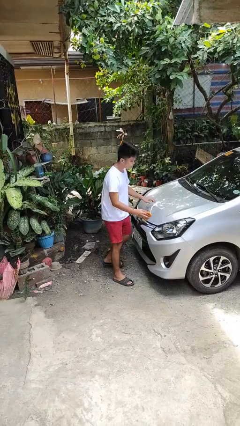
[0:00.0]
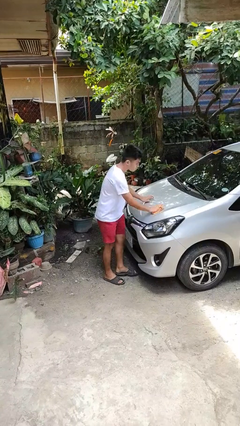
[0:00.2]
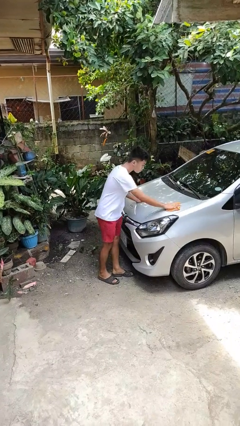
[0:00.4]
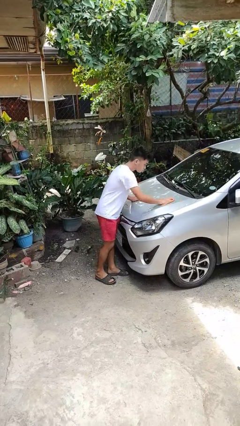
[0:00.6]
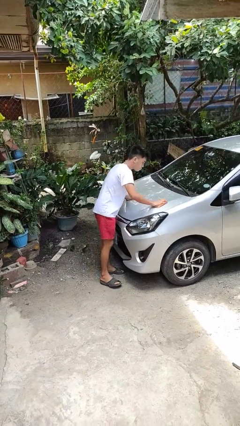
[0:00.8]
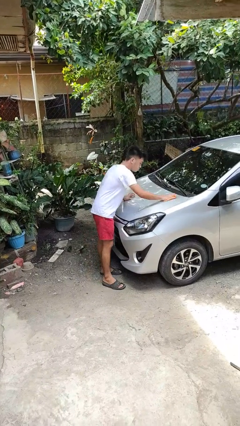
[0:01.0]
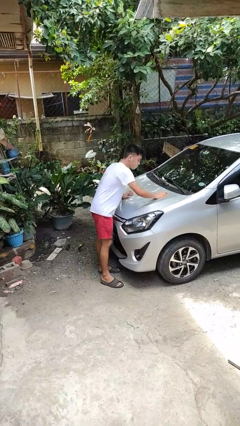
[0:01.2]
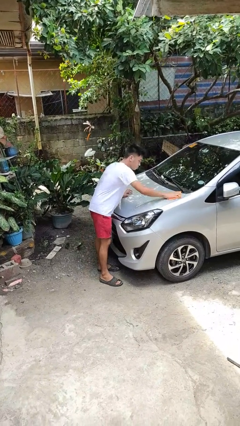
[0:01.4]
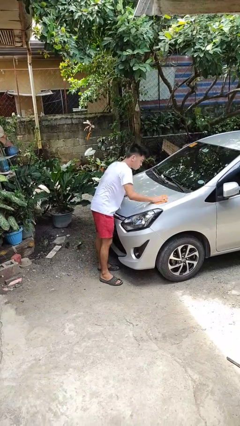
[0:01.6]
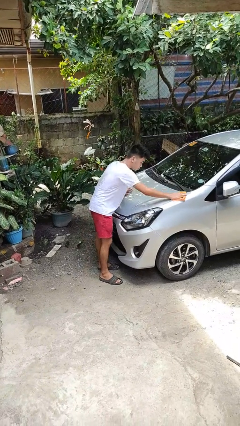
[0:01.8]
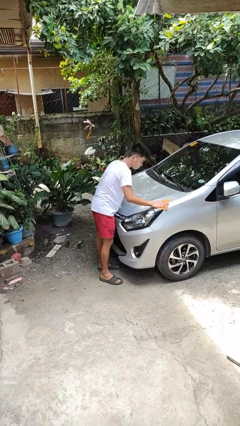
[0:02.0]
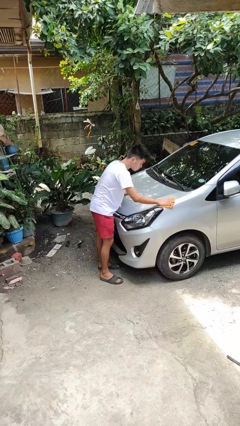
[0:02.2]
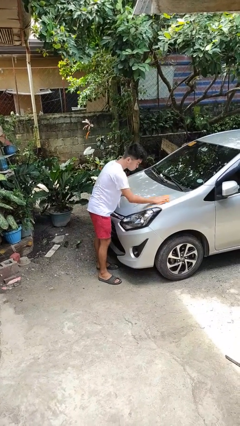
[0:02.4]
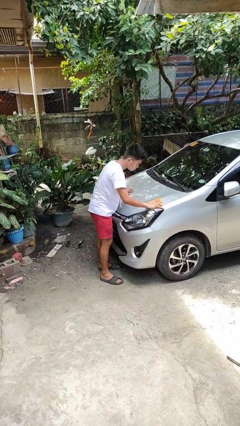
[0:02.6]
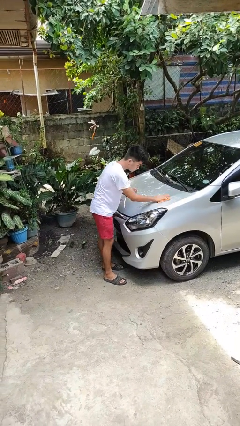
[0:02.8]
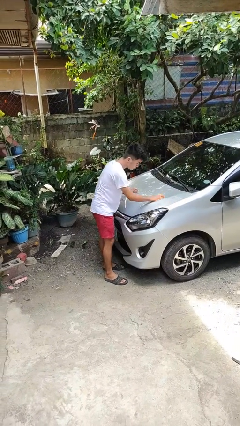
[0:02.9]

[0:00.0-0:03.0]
person polishes car with rag

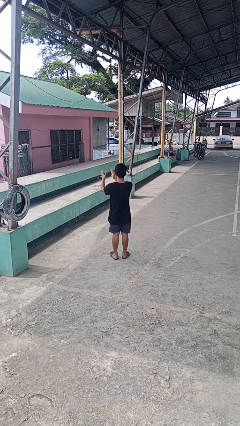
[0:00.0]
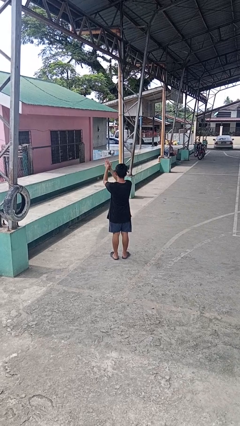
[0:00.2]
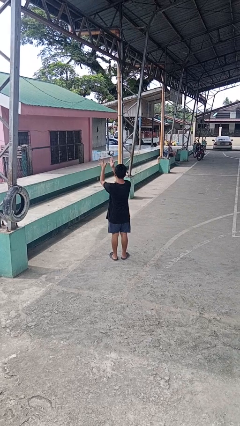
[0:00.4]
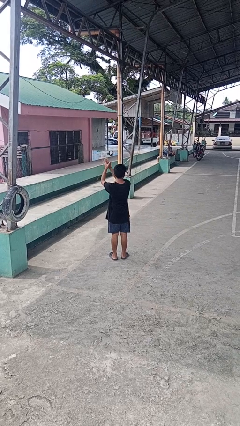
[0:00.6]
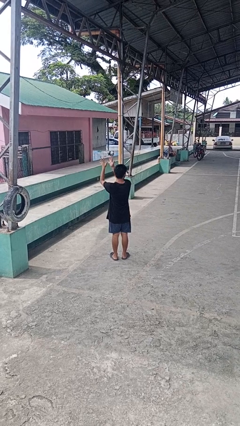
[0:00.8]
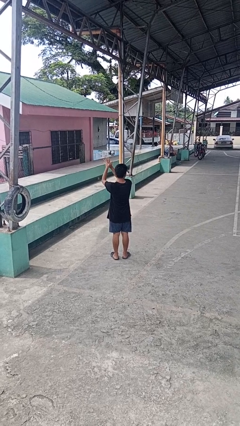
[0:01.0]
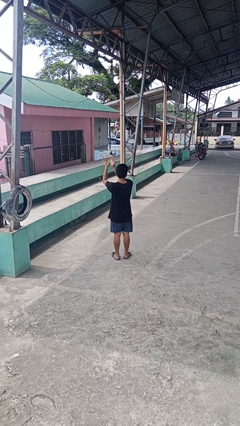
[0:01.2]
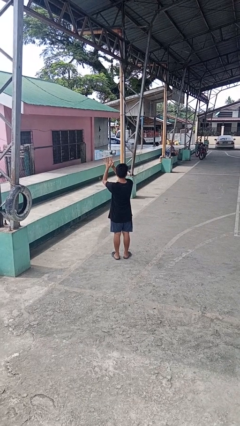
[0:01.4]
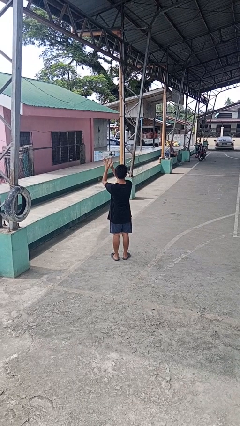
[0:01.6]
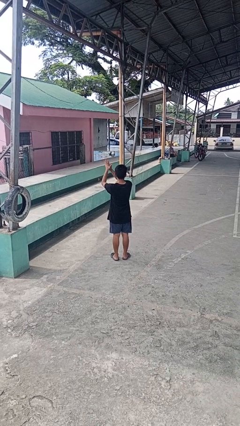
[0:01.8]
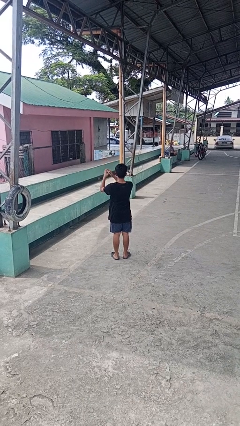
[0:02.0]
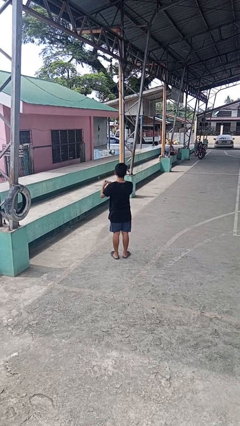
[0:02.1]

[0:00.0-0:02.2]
person claps hands

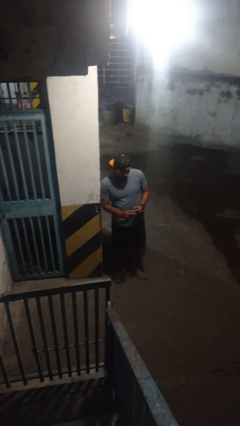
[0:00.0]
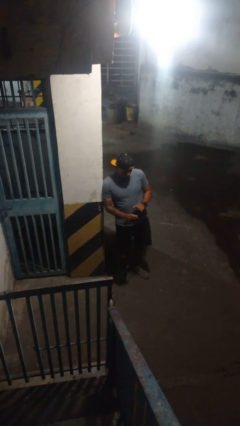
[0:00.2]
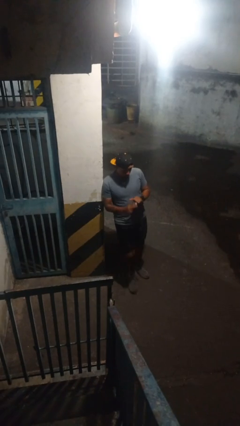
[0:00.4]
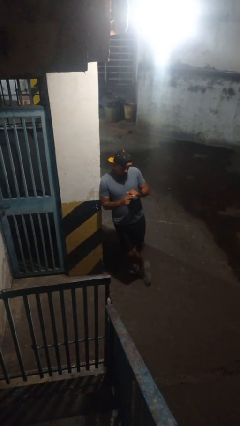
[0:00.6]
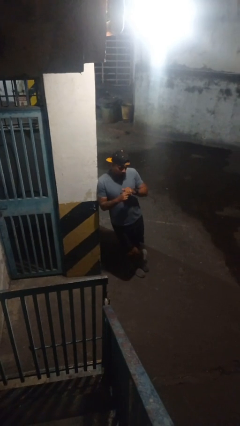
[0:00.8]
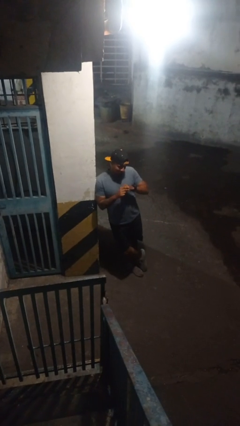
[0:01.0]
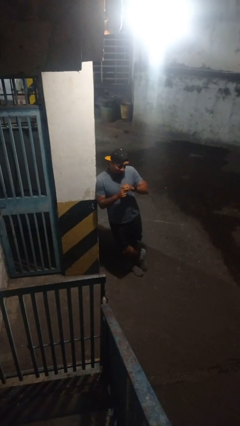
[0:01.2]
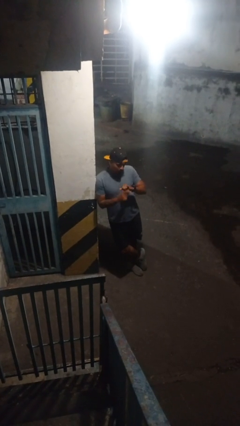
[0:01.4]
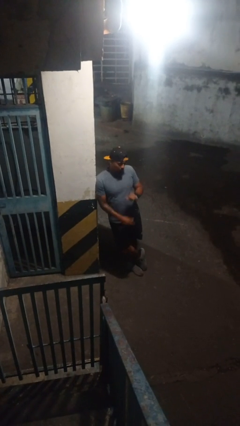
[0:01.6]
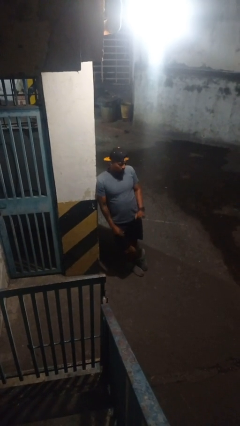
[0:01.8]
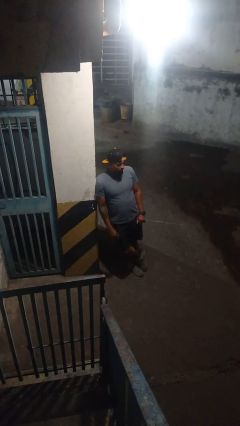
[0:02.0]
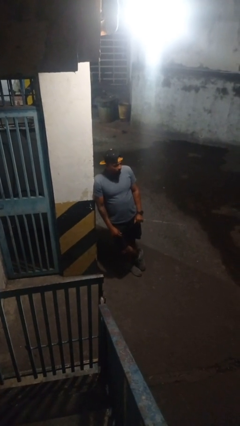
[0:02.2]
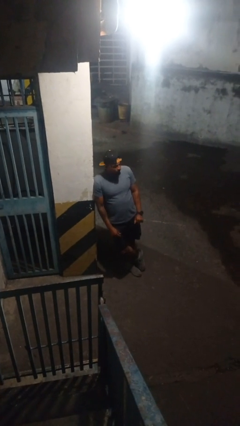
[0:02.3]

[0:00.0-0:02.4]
person puts on ring

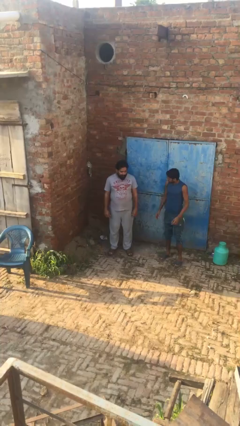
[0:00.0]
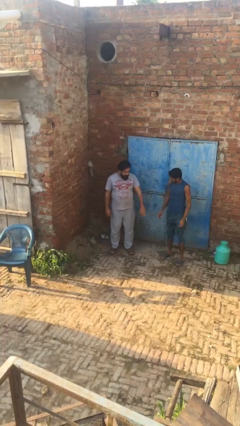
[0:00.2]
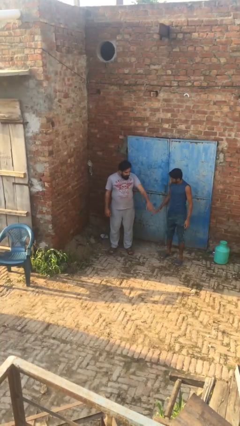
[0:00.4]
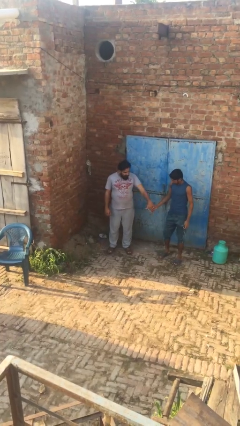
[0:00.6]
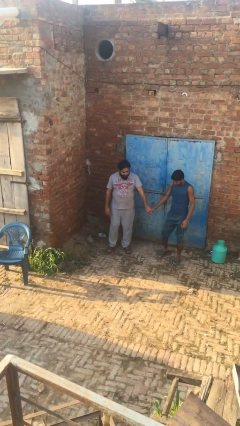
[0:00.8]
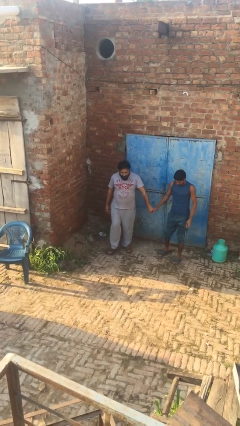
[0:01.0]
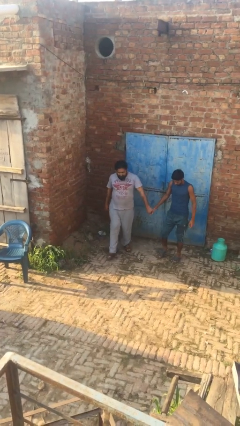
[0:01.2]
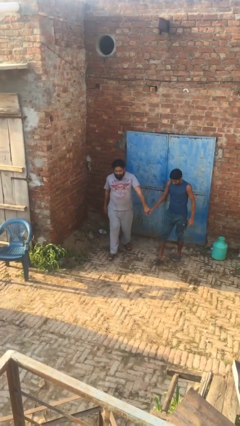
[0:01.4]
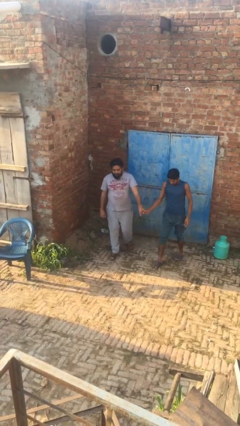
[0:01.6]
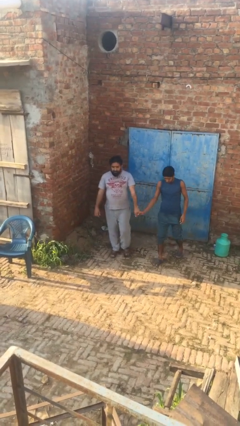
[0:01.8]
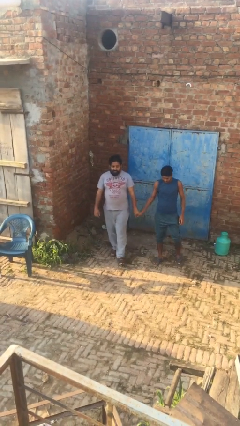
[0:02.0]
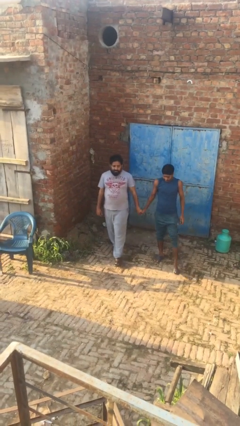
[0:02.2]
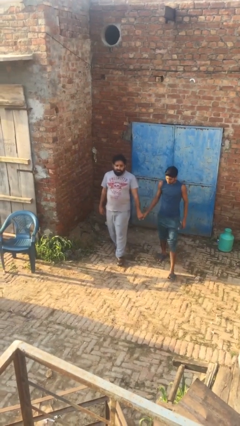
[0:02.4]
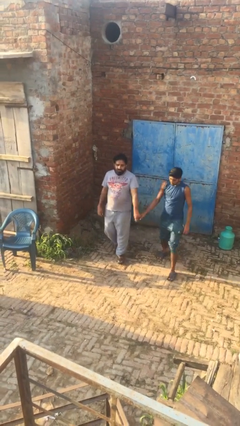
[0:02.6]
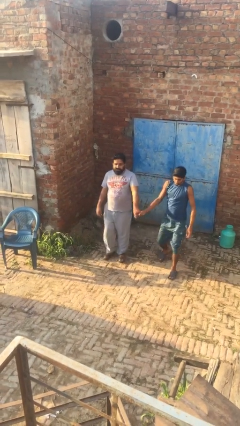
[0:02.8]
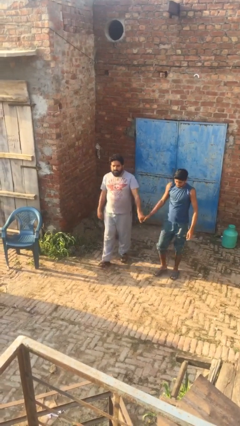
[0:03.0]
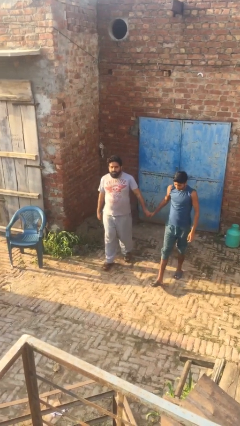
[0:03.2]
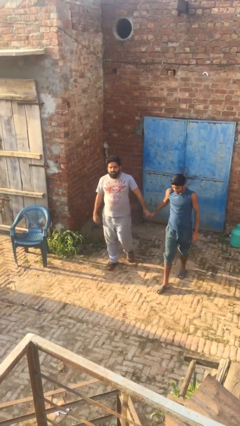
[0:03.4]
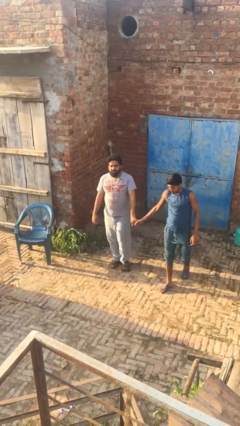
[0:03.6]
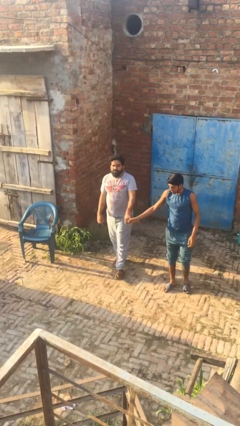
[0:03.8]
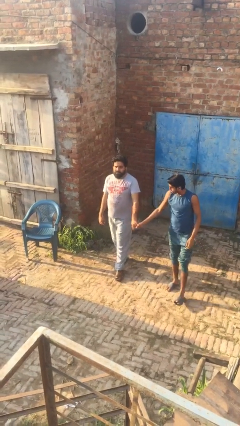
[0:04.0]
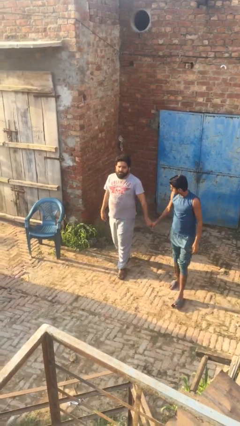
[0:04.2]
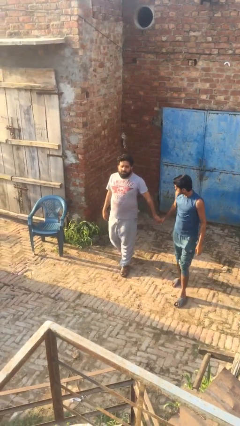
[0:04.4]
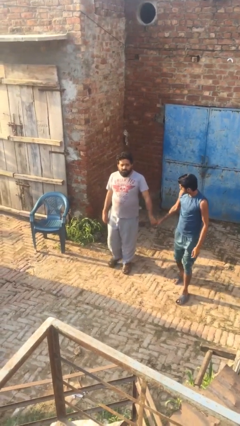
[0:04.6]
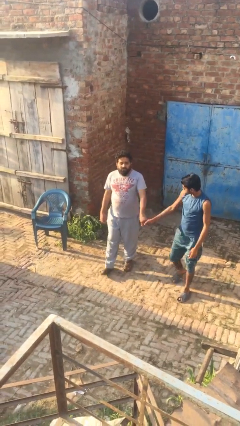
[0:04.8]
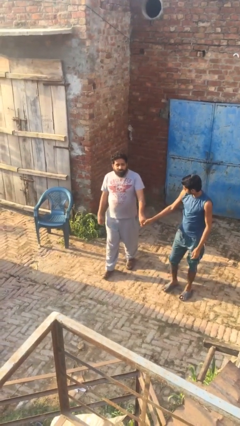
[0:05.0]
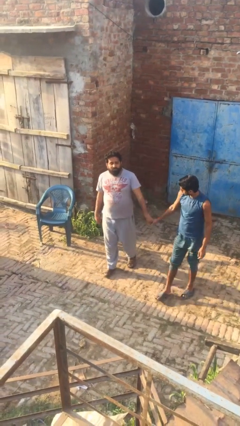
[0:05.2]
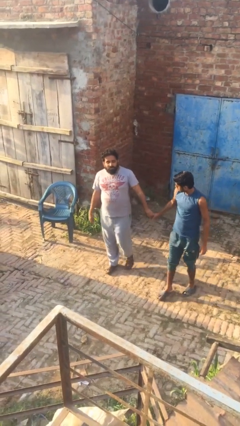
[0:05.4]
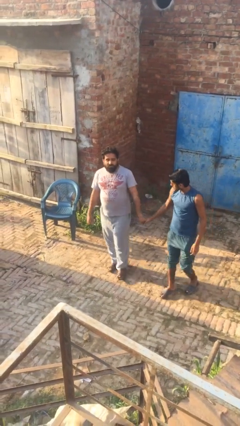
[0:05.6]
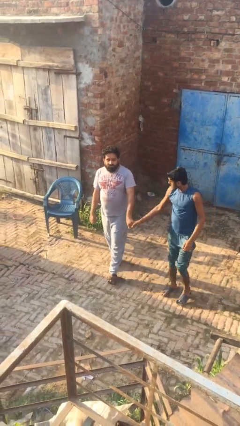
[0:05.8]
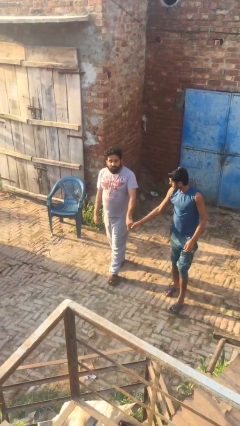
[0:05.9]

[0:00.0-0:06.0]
person holds hand

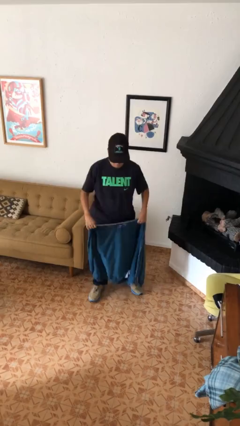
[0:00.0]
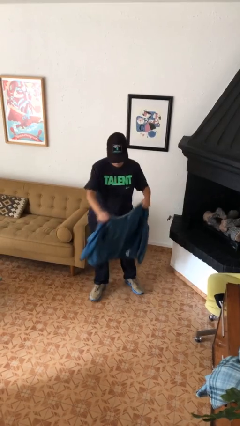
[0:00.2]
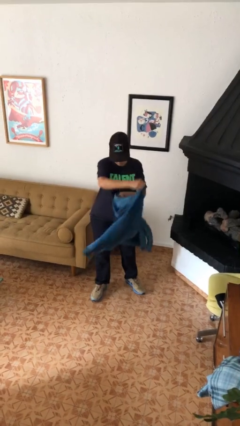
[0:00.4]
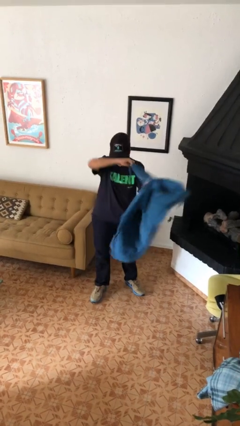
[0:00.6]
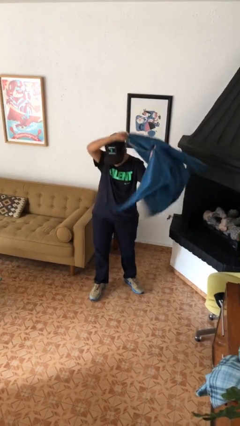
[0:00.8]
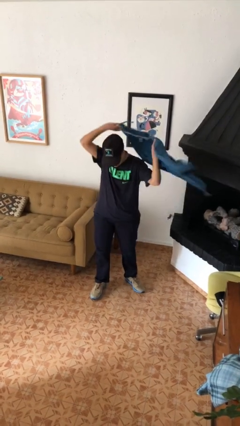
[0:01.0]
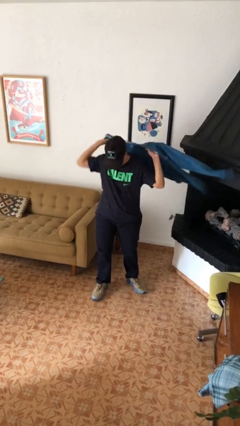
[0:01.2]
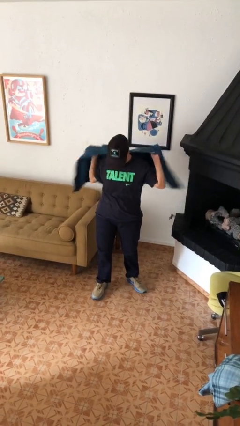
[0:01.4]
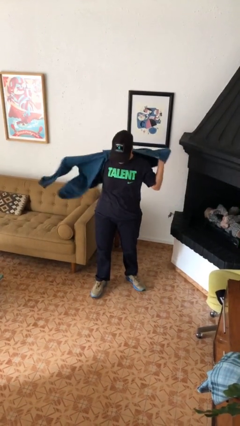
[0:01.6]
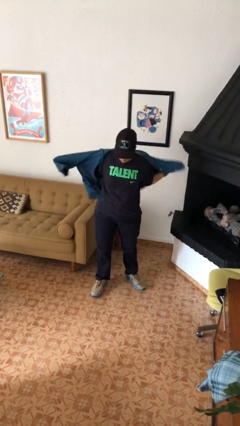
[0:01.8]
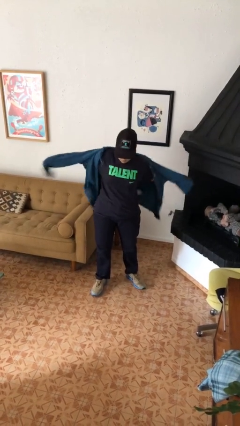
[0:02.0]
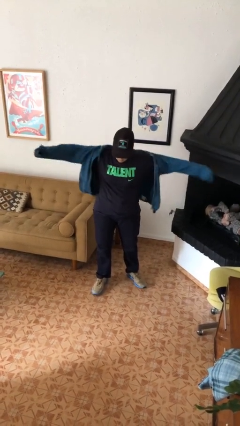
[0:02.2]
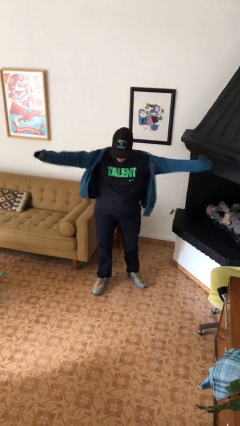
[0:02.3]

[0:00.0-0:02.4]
person puts on hoodie

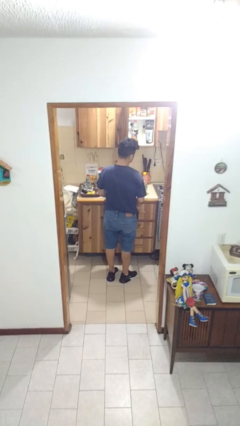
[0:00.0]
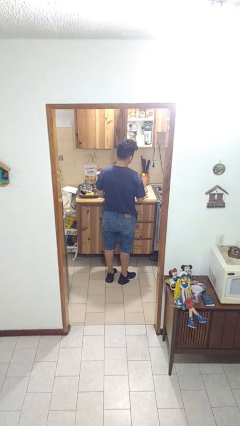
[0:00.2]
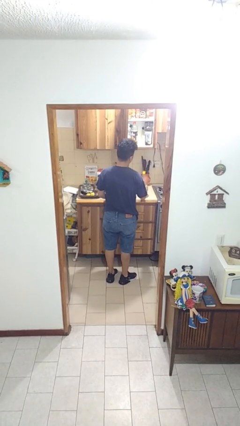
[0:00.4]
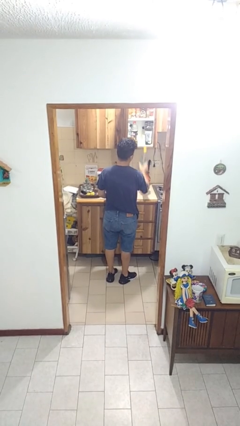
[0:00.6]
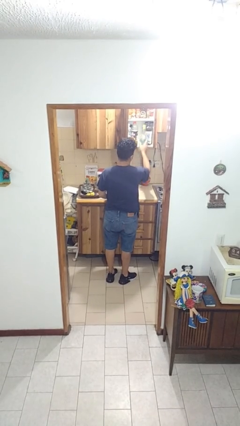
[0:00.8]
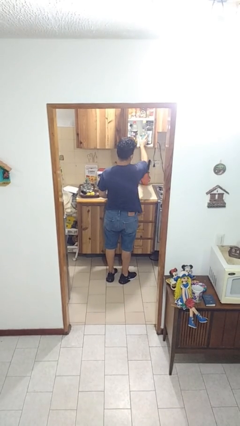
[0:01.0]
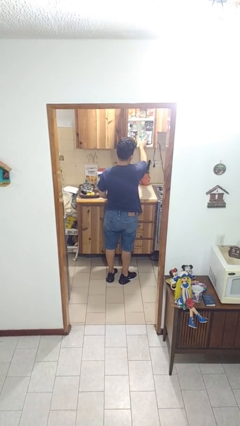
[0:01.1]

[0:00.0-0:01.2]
person puts object in cabinet

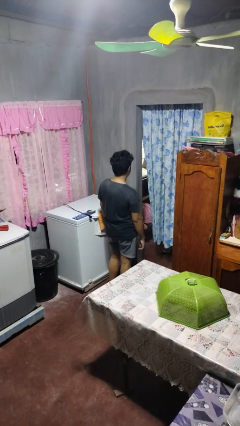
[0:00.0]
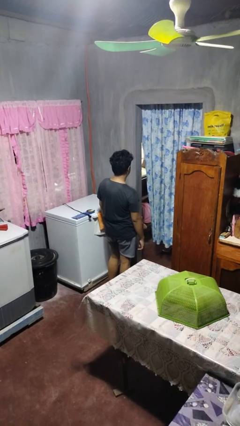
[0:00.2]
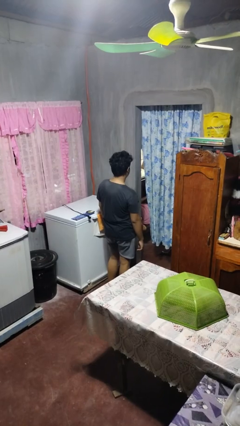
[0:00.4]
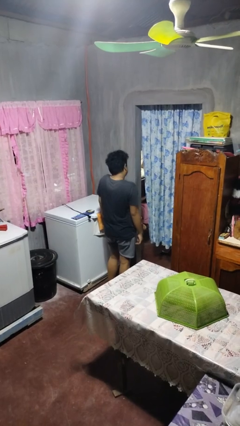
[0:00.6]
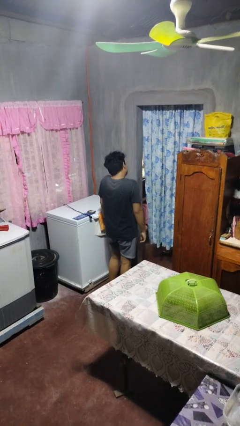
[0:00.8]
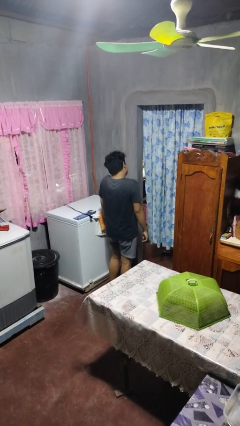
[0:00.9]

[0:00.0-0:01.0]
person shrugs
